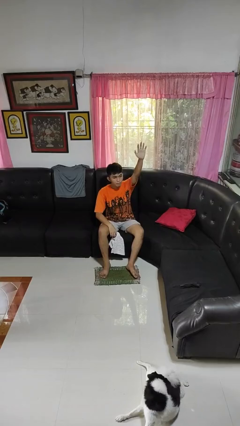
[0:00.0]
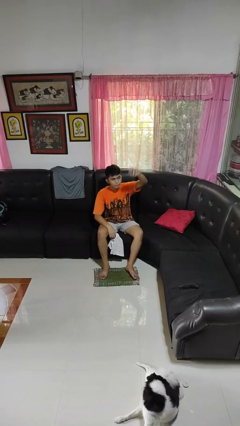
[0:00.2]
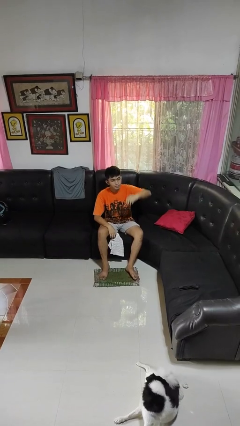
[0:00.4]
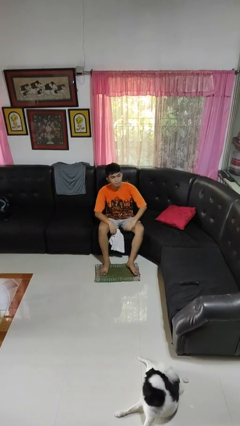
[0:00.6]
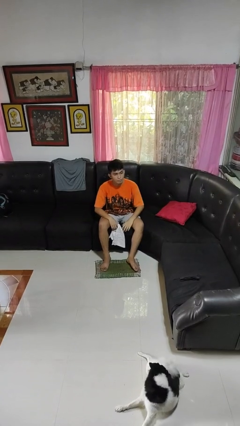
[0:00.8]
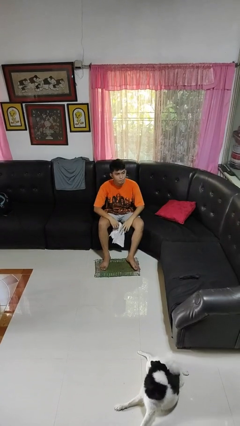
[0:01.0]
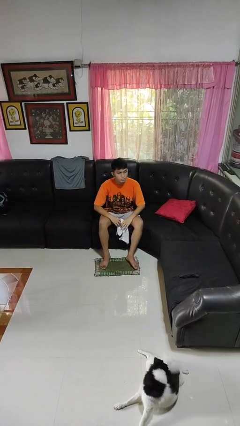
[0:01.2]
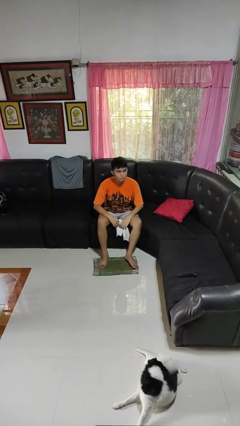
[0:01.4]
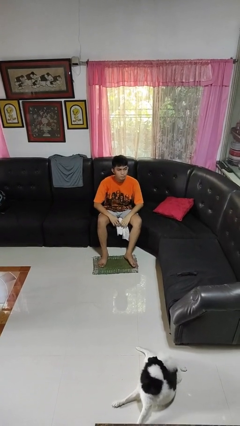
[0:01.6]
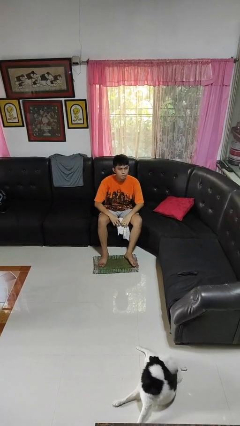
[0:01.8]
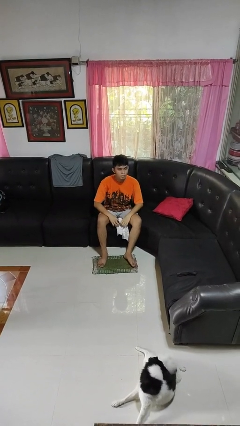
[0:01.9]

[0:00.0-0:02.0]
person gestures lower hand

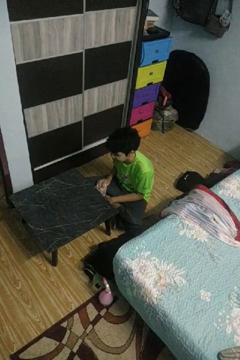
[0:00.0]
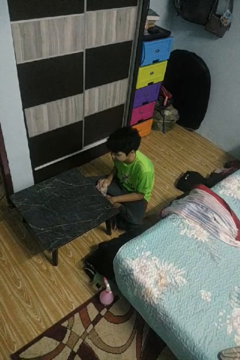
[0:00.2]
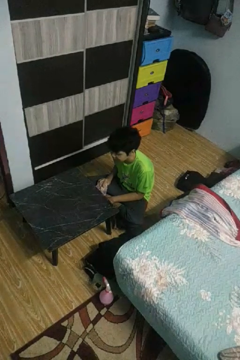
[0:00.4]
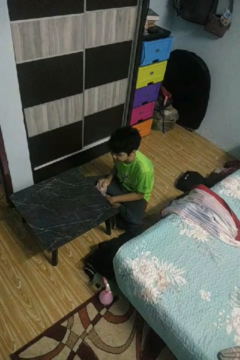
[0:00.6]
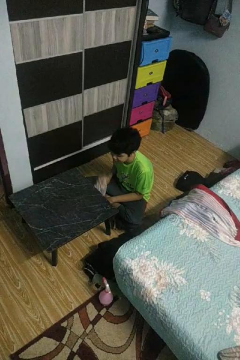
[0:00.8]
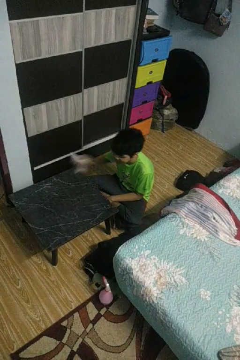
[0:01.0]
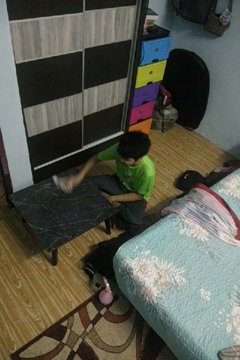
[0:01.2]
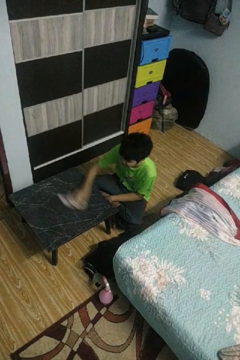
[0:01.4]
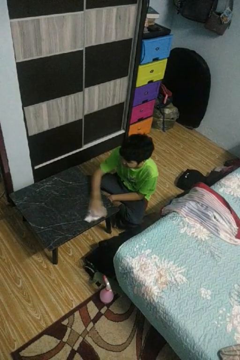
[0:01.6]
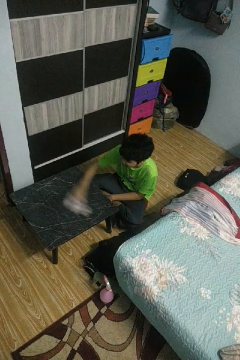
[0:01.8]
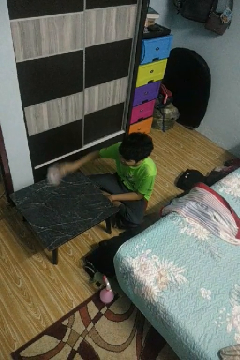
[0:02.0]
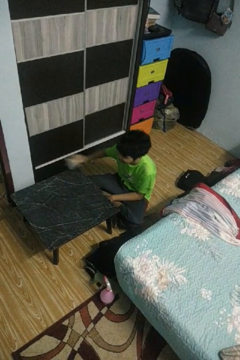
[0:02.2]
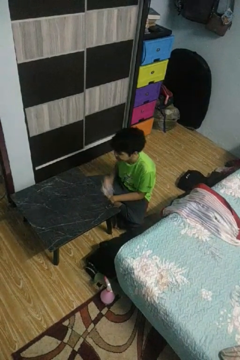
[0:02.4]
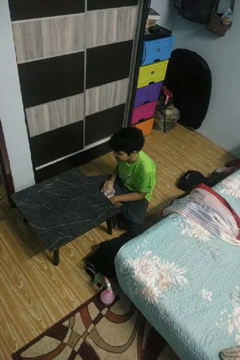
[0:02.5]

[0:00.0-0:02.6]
person cleans table with rag

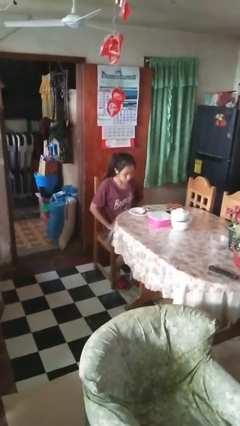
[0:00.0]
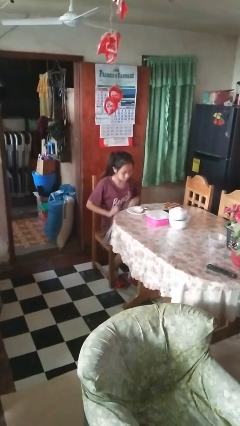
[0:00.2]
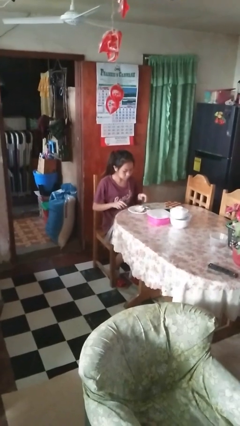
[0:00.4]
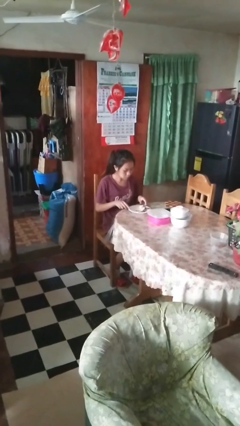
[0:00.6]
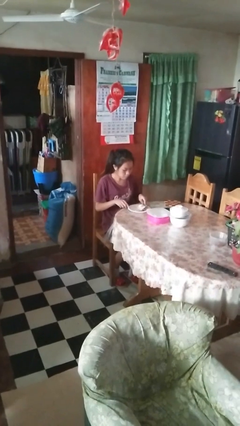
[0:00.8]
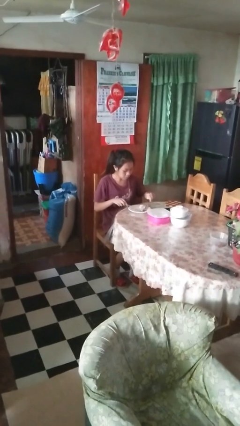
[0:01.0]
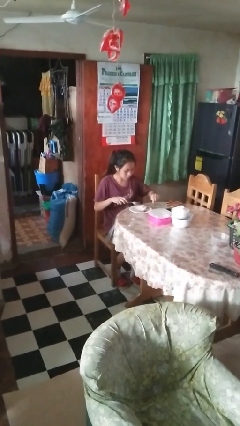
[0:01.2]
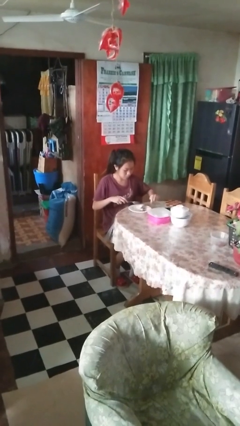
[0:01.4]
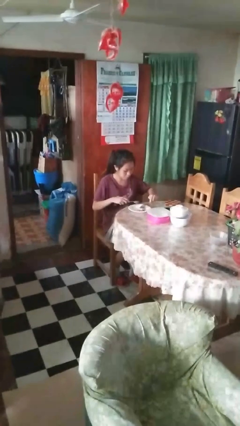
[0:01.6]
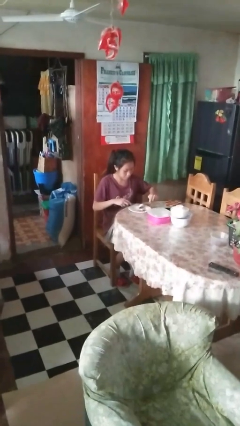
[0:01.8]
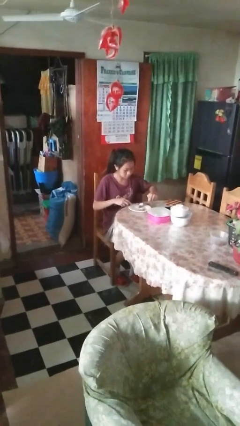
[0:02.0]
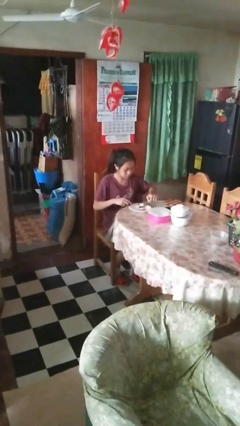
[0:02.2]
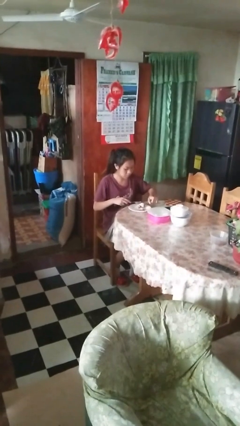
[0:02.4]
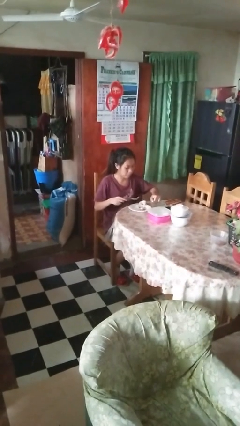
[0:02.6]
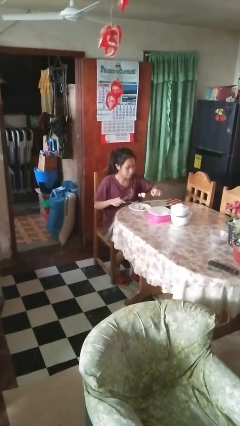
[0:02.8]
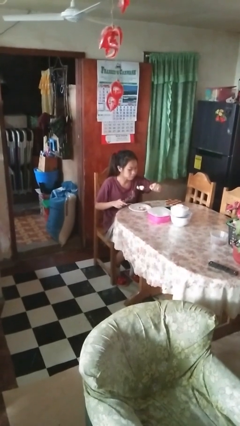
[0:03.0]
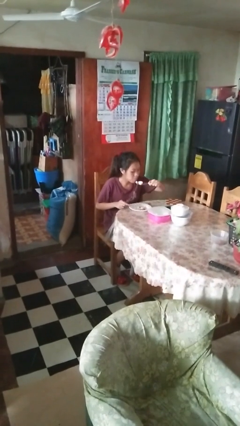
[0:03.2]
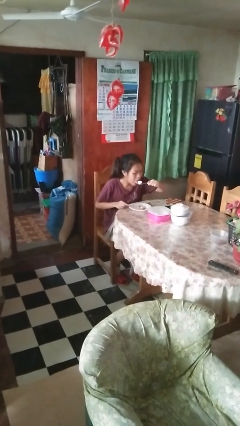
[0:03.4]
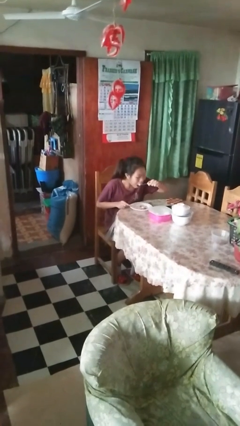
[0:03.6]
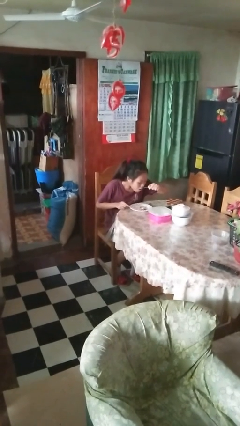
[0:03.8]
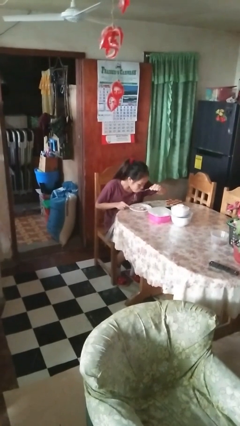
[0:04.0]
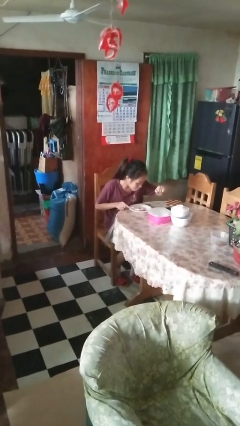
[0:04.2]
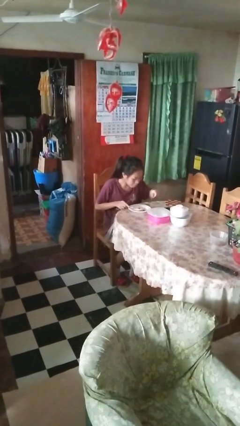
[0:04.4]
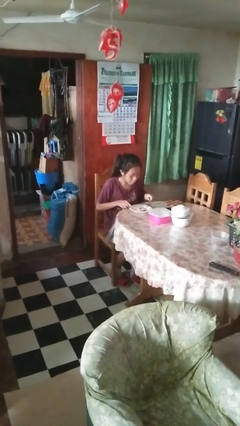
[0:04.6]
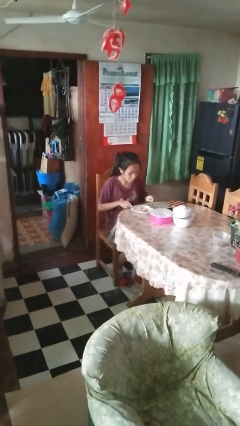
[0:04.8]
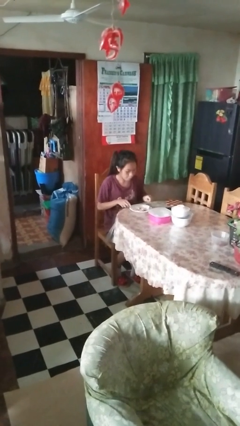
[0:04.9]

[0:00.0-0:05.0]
person eats with utensil

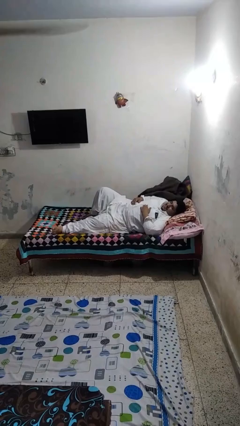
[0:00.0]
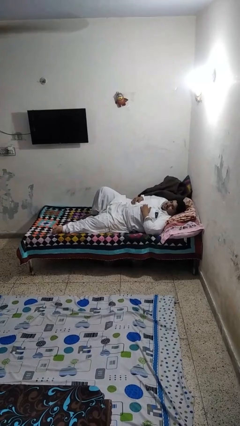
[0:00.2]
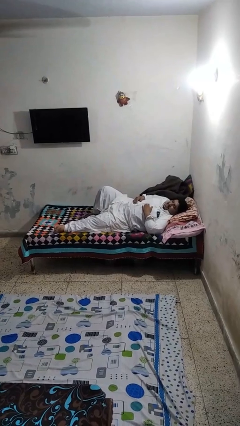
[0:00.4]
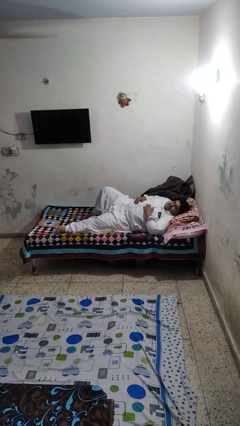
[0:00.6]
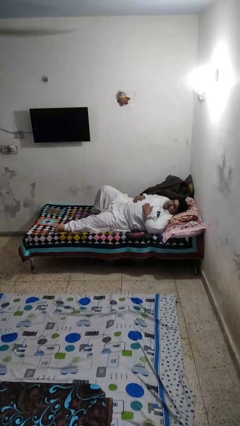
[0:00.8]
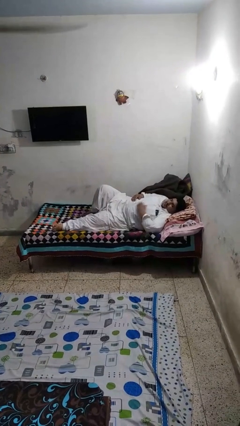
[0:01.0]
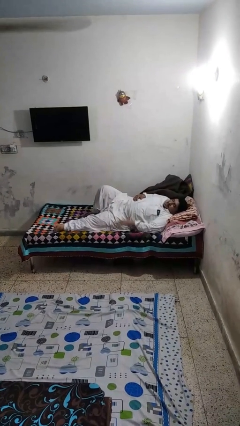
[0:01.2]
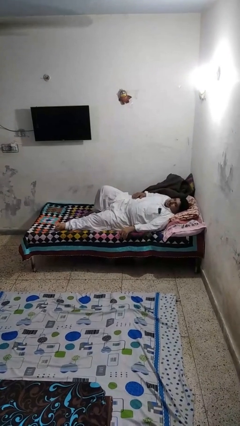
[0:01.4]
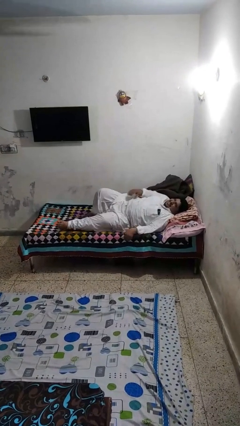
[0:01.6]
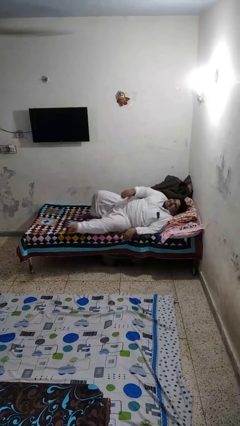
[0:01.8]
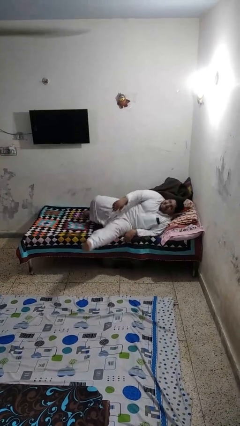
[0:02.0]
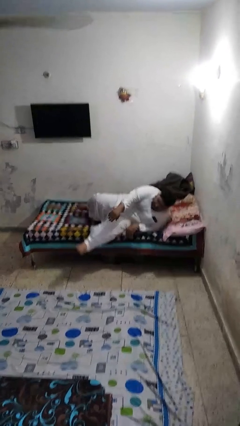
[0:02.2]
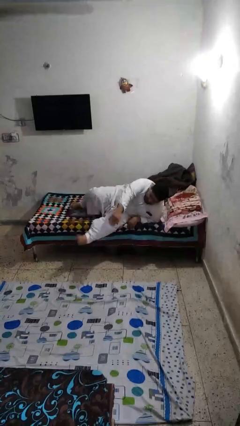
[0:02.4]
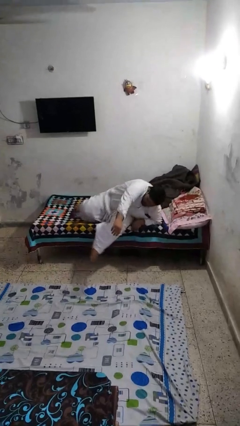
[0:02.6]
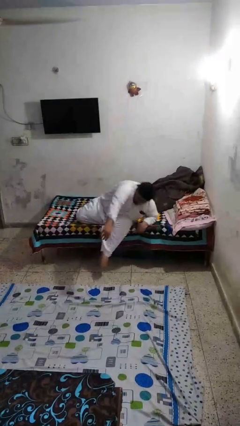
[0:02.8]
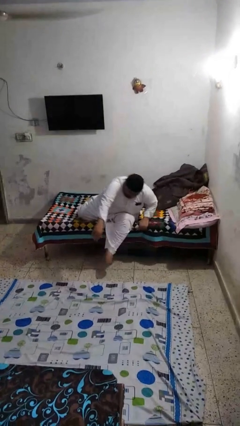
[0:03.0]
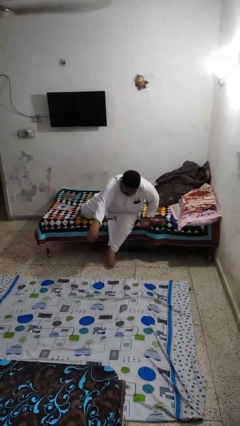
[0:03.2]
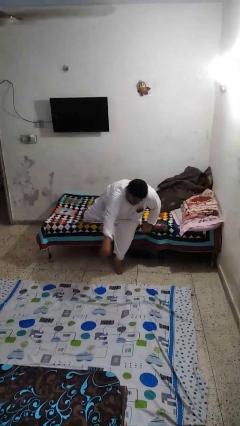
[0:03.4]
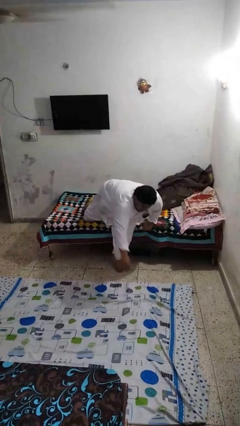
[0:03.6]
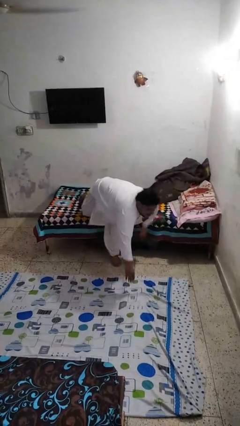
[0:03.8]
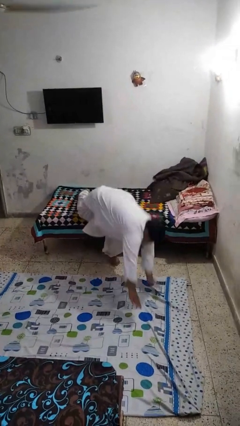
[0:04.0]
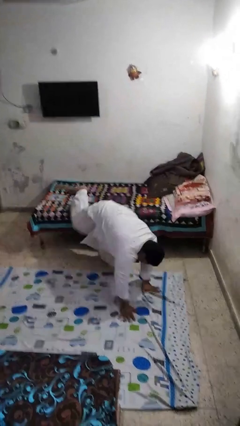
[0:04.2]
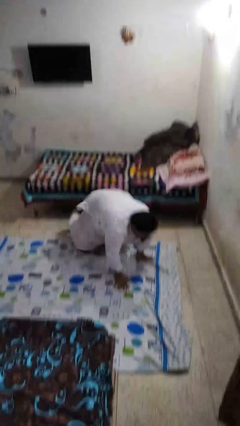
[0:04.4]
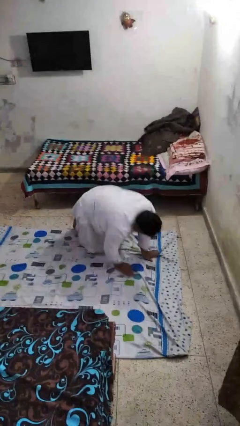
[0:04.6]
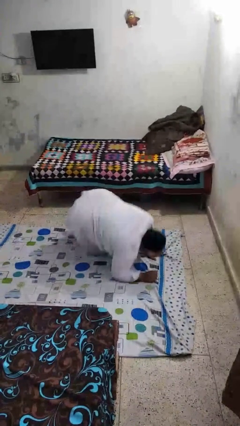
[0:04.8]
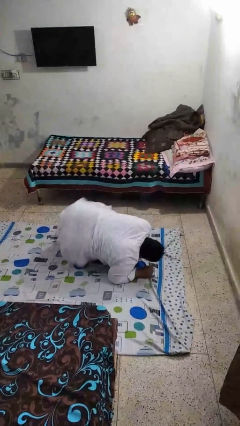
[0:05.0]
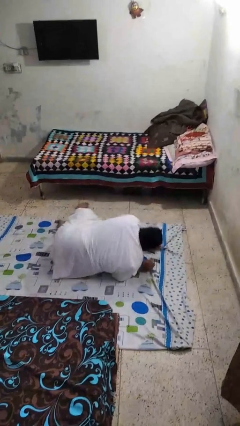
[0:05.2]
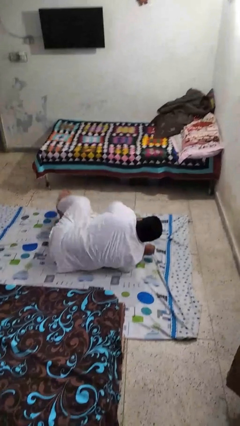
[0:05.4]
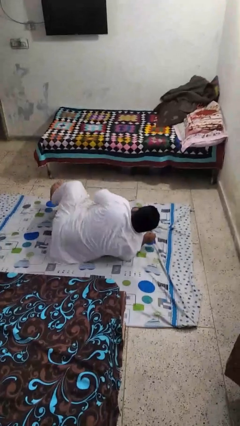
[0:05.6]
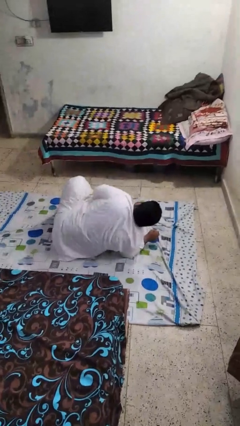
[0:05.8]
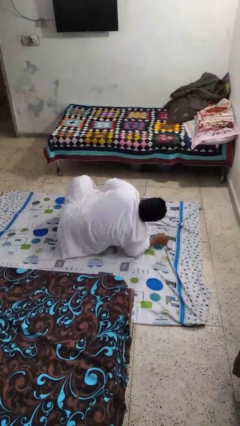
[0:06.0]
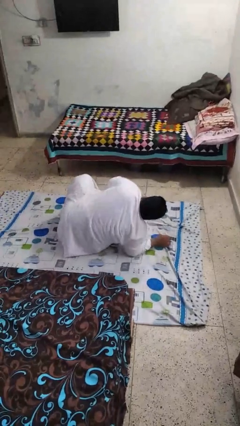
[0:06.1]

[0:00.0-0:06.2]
person falls from bed

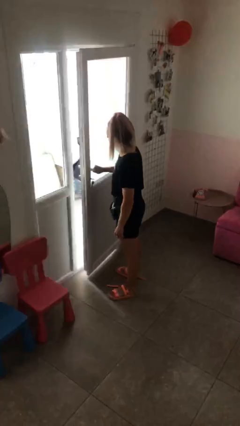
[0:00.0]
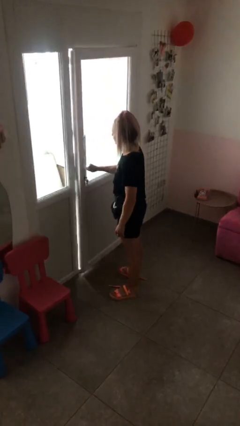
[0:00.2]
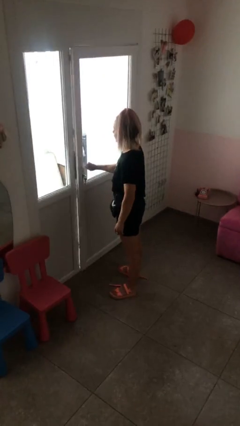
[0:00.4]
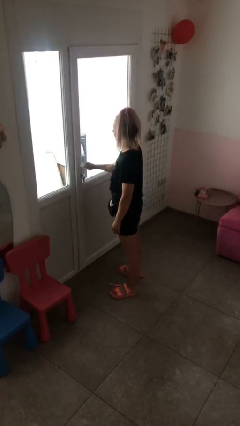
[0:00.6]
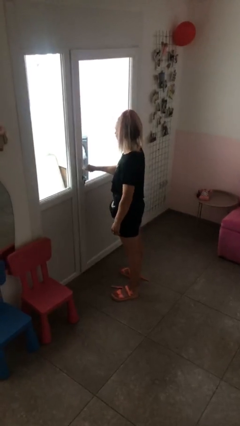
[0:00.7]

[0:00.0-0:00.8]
person closes facility door

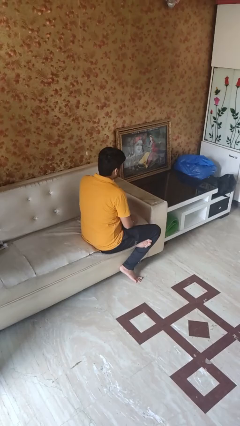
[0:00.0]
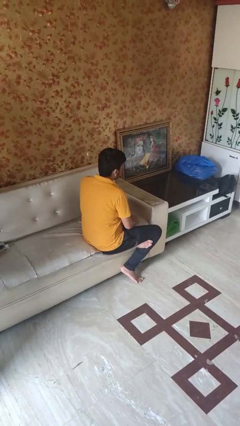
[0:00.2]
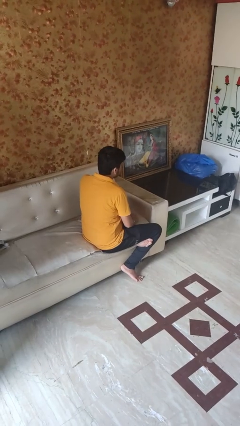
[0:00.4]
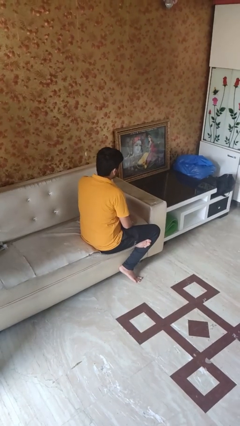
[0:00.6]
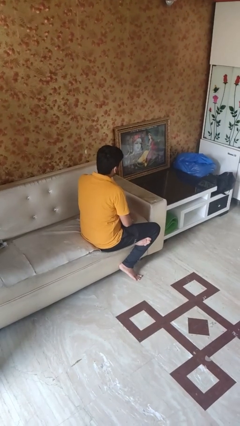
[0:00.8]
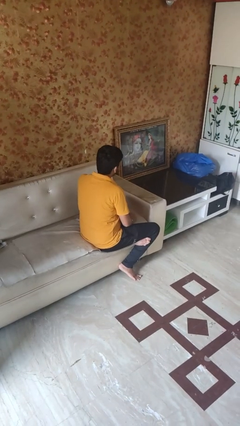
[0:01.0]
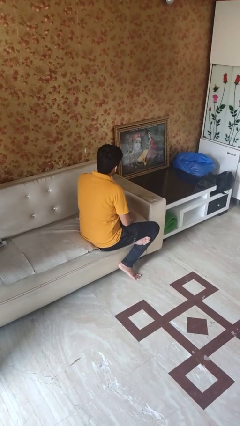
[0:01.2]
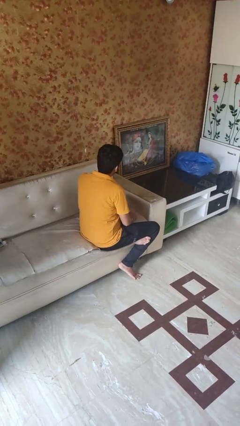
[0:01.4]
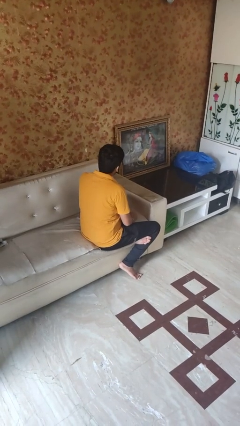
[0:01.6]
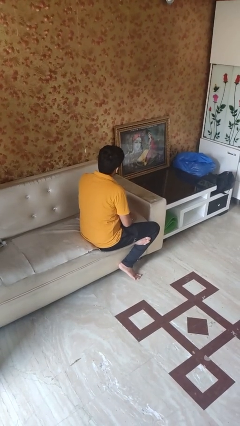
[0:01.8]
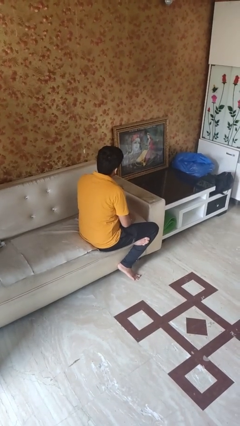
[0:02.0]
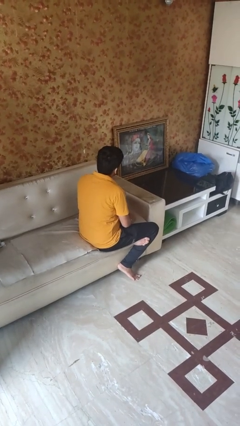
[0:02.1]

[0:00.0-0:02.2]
person rubs eyes
